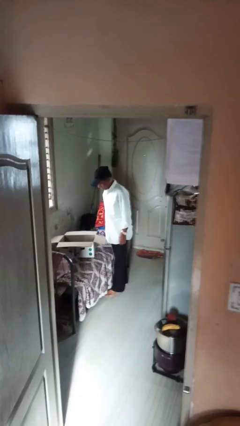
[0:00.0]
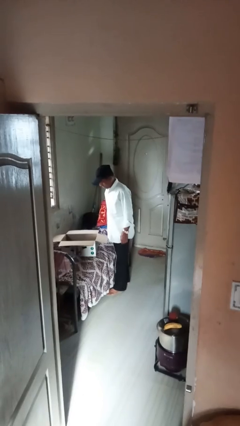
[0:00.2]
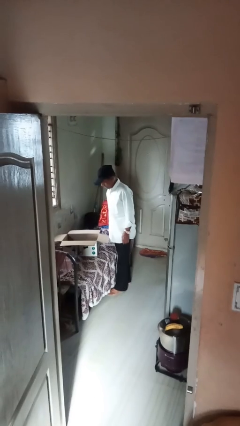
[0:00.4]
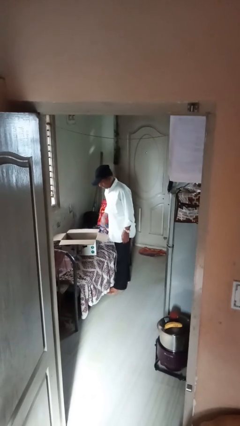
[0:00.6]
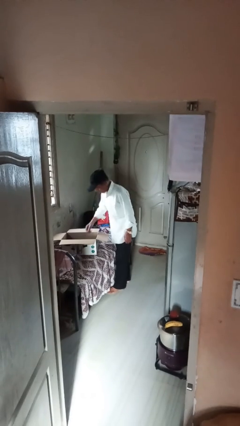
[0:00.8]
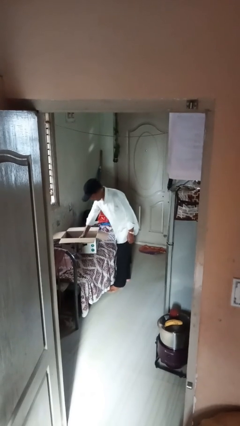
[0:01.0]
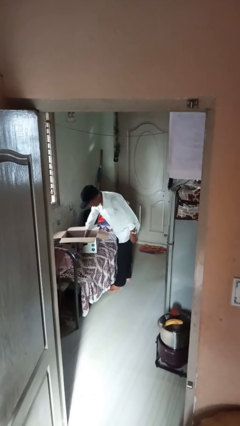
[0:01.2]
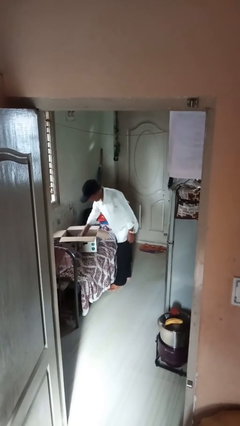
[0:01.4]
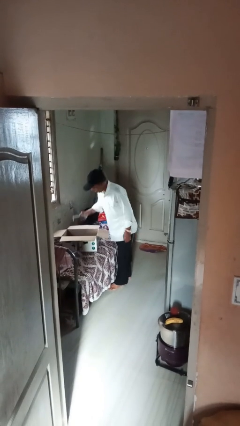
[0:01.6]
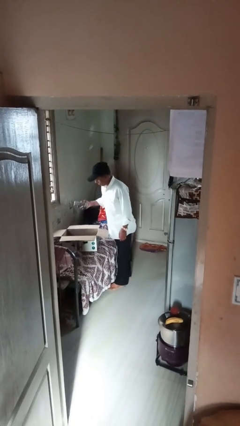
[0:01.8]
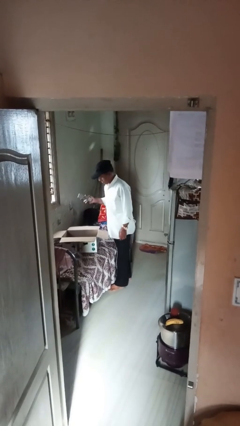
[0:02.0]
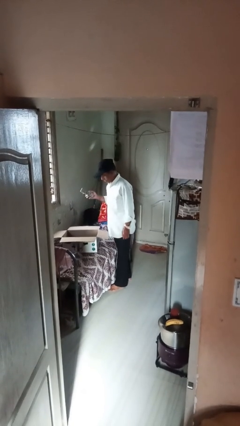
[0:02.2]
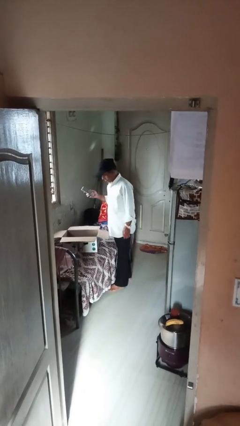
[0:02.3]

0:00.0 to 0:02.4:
person takes object from box

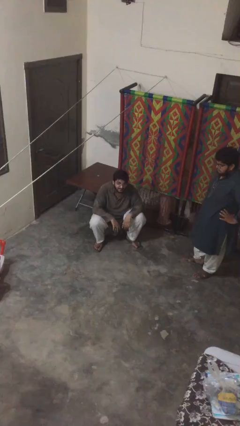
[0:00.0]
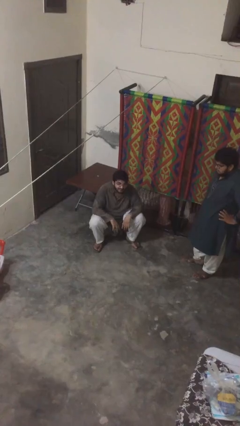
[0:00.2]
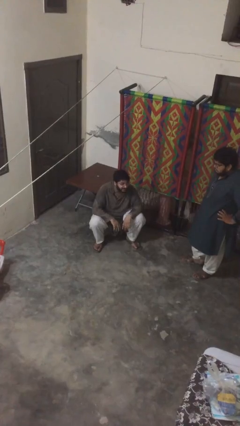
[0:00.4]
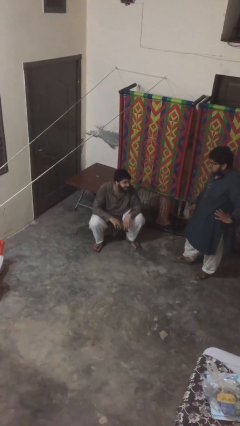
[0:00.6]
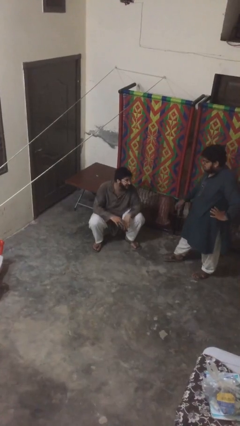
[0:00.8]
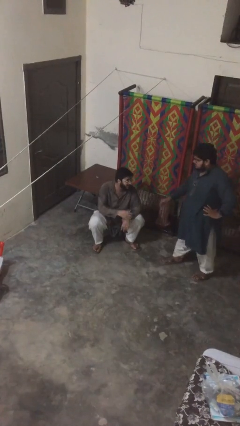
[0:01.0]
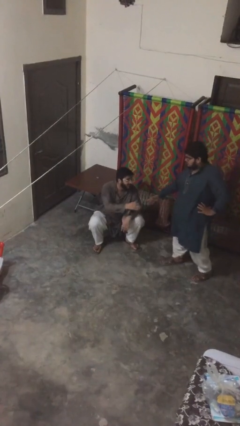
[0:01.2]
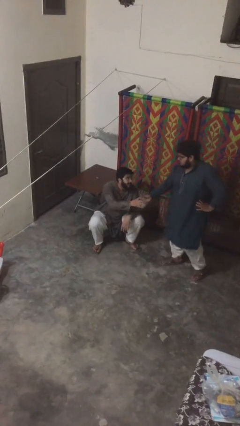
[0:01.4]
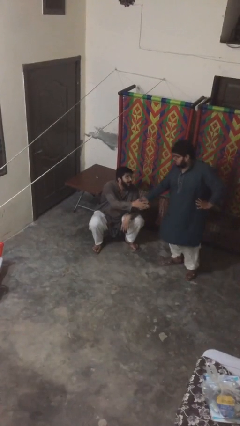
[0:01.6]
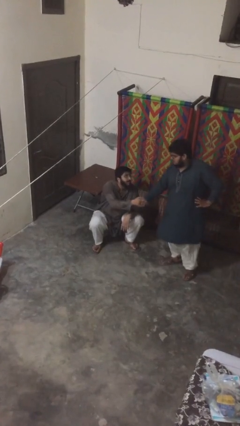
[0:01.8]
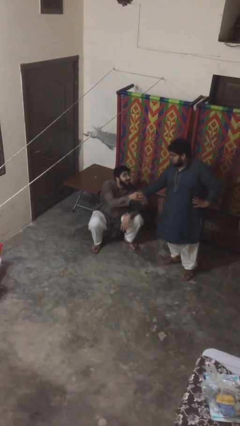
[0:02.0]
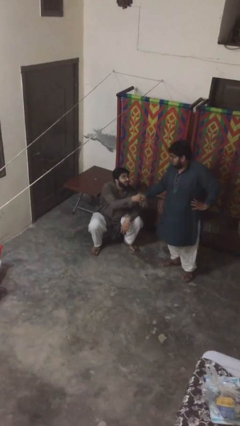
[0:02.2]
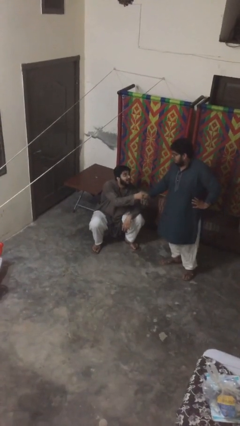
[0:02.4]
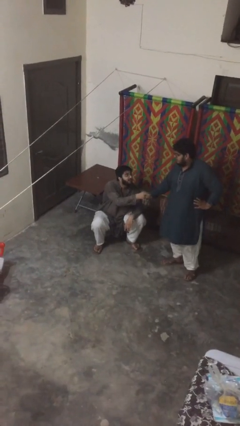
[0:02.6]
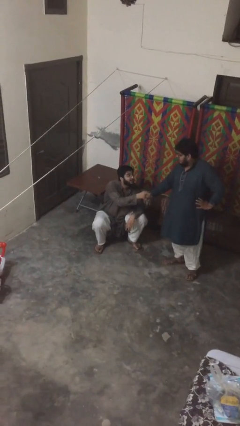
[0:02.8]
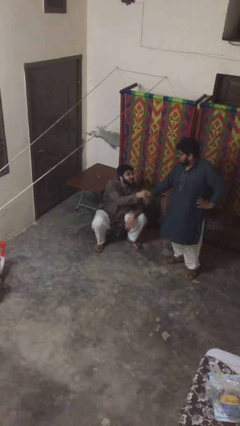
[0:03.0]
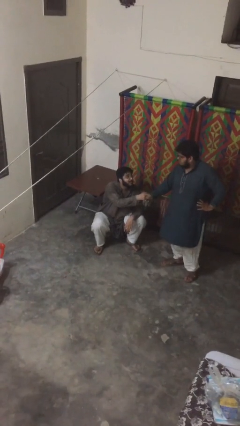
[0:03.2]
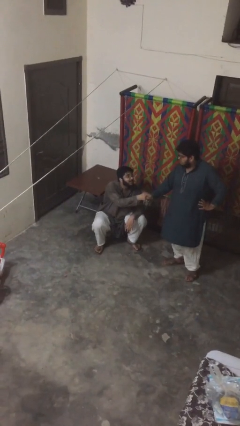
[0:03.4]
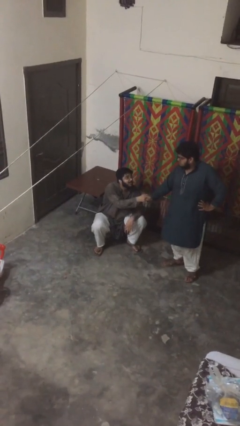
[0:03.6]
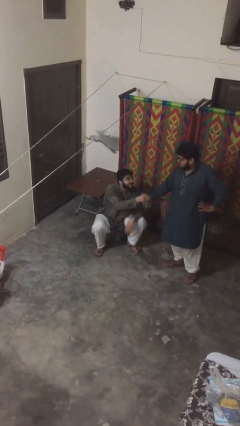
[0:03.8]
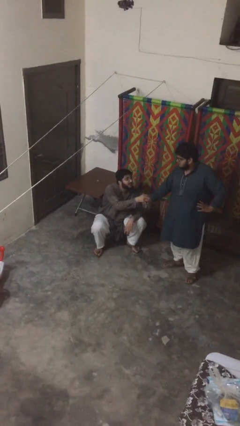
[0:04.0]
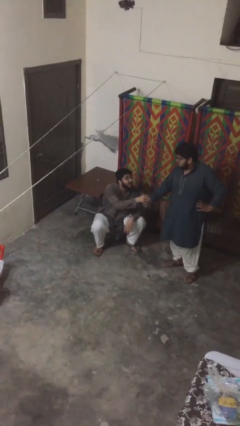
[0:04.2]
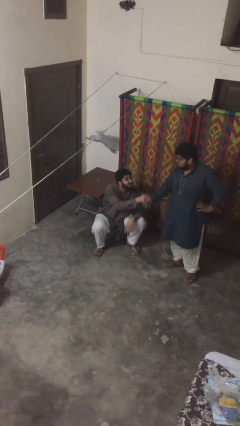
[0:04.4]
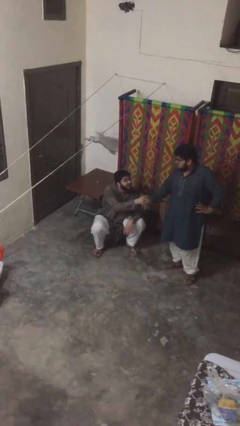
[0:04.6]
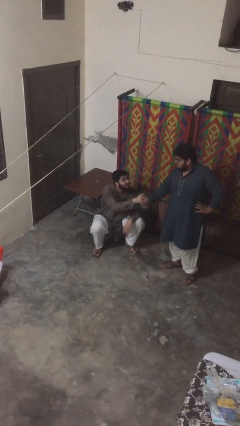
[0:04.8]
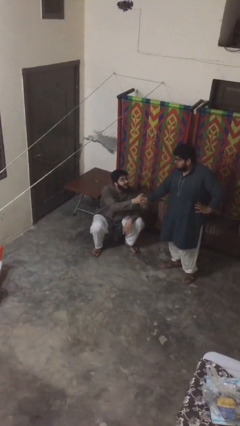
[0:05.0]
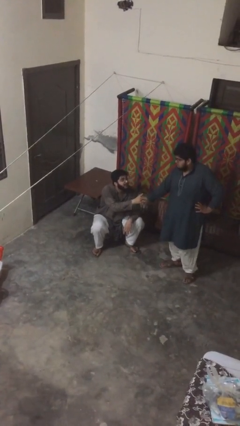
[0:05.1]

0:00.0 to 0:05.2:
person shakes hand

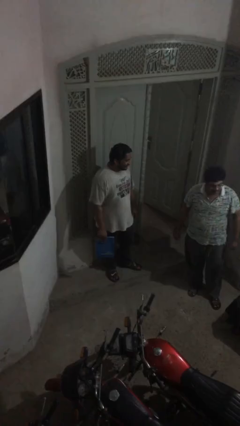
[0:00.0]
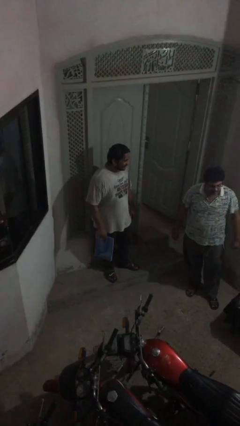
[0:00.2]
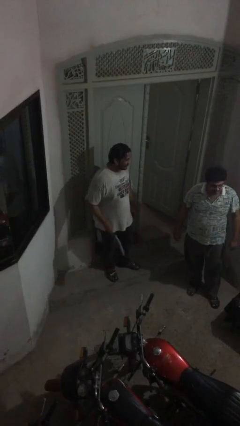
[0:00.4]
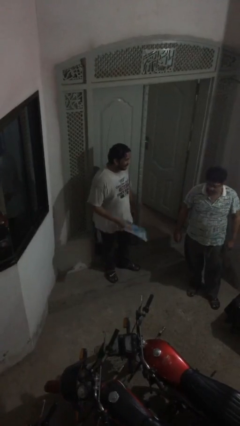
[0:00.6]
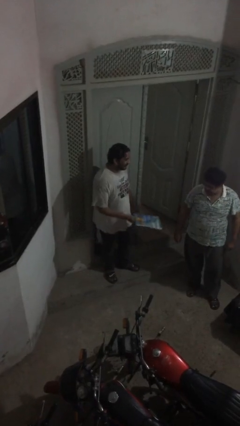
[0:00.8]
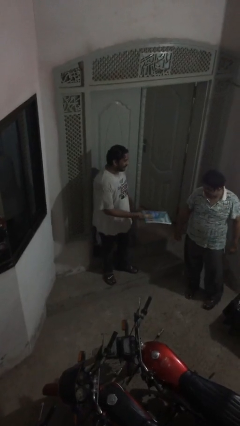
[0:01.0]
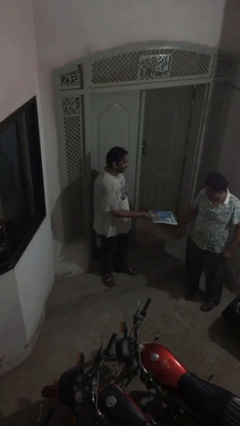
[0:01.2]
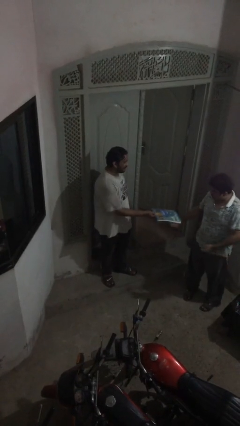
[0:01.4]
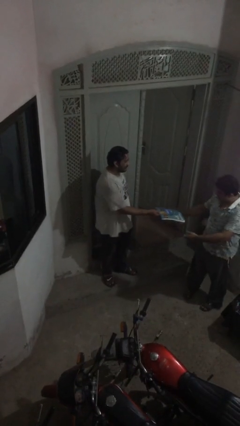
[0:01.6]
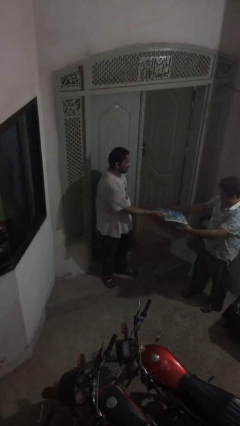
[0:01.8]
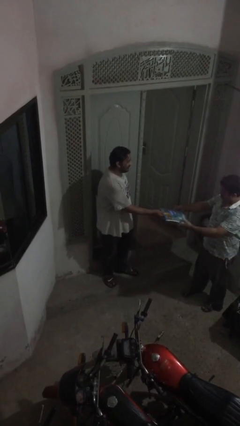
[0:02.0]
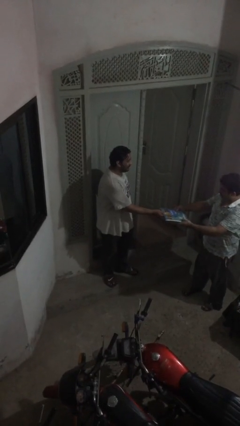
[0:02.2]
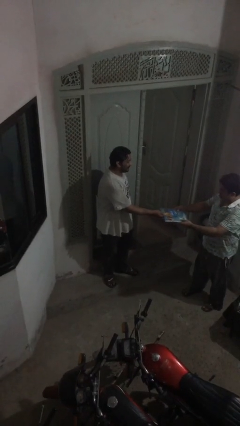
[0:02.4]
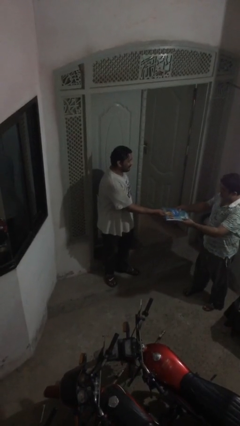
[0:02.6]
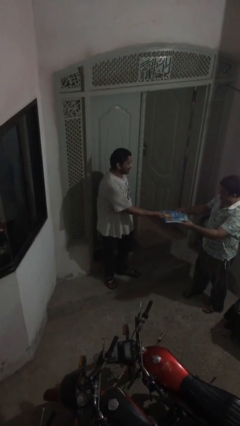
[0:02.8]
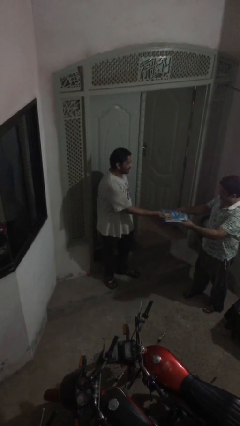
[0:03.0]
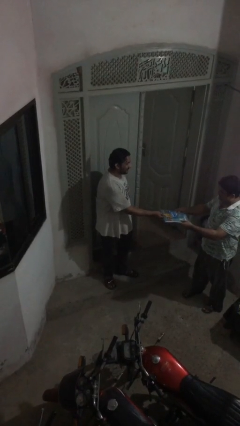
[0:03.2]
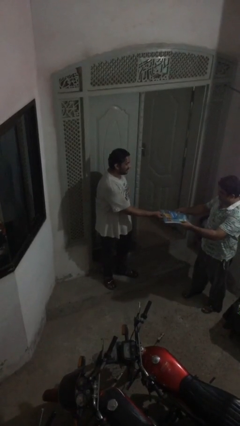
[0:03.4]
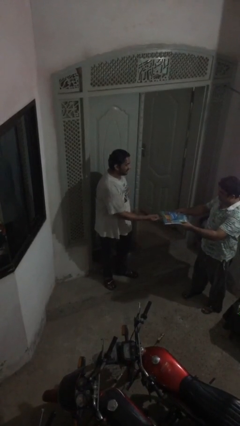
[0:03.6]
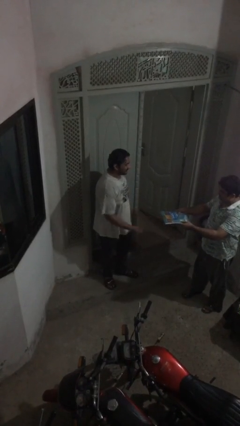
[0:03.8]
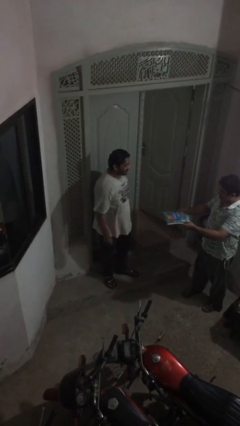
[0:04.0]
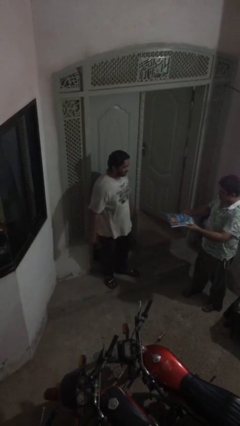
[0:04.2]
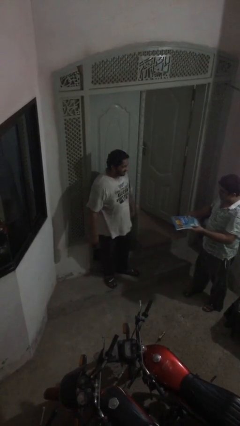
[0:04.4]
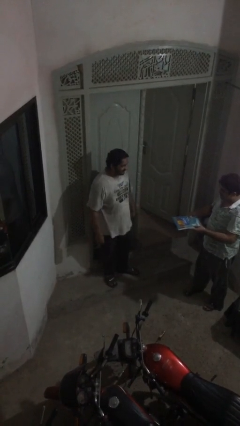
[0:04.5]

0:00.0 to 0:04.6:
person transfers object to person

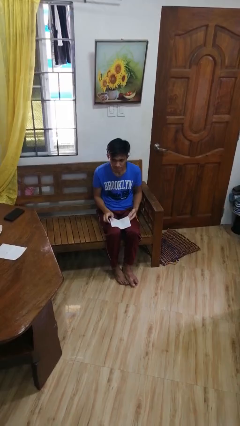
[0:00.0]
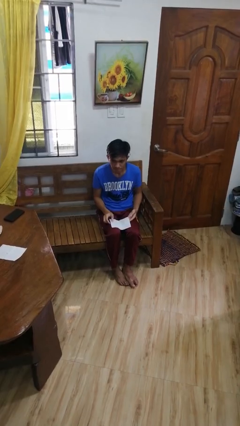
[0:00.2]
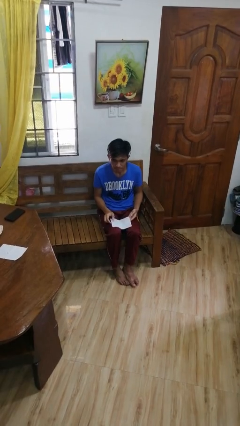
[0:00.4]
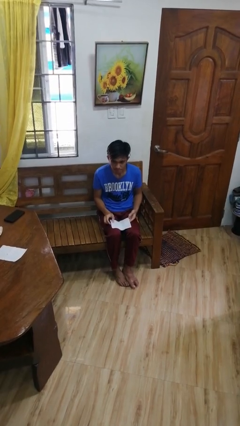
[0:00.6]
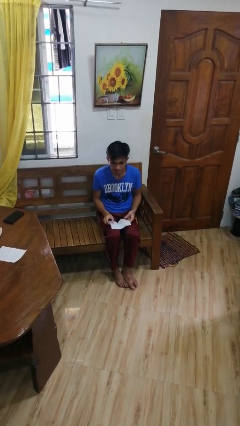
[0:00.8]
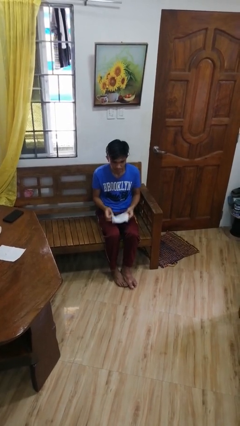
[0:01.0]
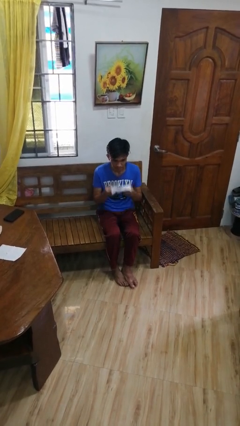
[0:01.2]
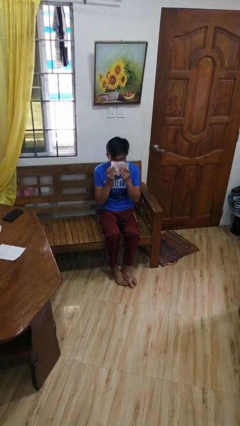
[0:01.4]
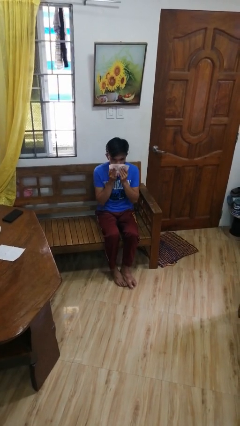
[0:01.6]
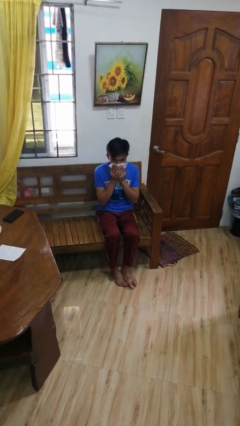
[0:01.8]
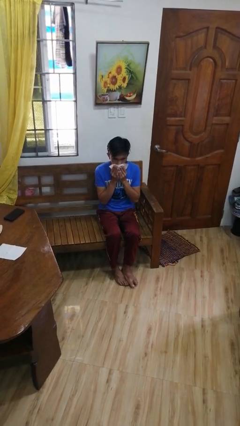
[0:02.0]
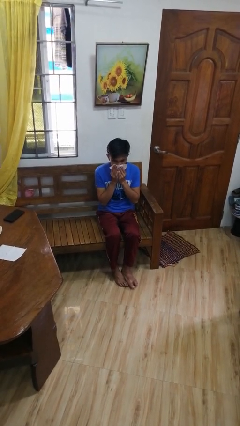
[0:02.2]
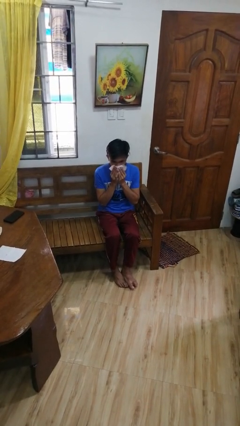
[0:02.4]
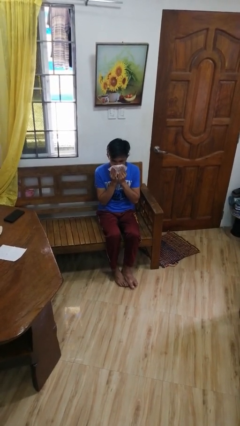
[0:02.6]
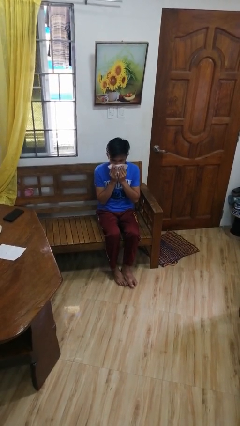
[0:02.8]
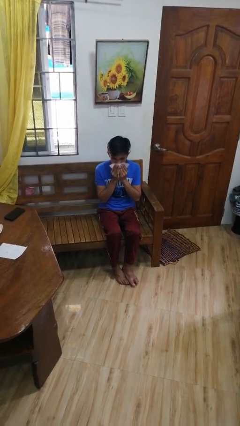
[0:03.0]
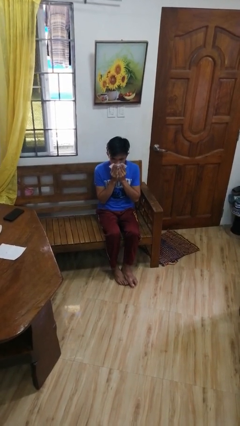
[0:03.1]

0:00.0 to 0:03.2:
person wipes mouth with napkin

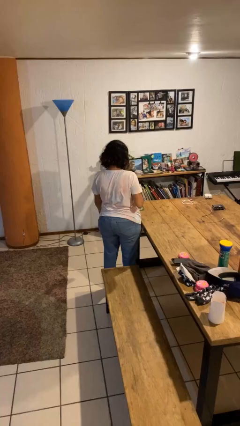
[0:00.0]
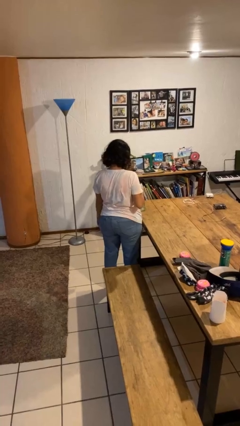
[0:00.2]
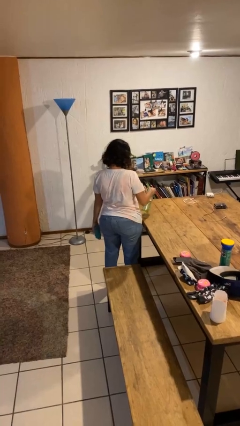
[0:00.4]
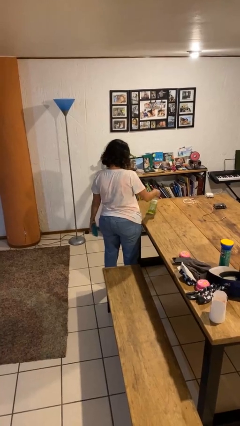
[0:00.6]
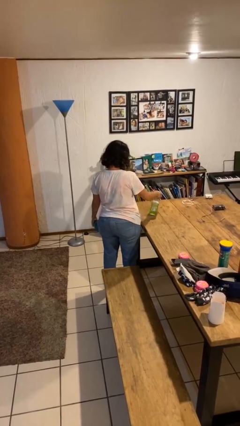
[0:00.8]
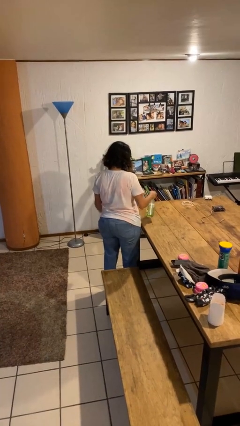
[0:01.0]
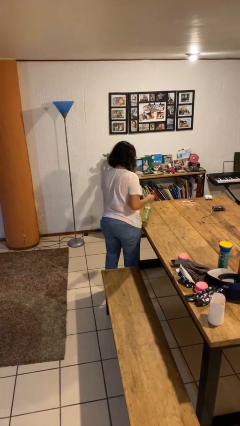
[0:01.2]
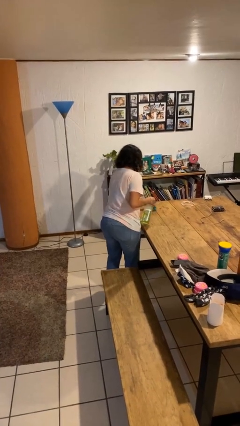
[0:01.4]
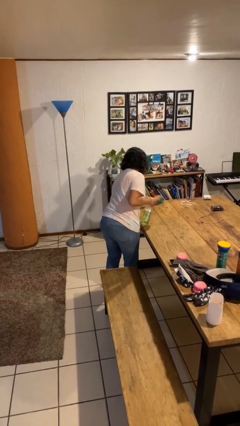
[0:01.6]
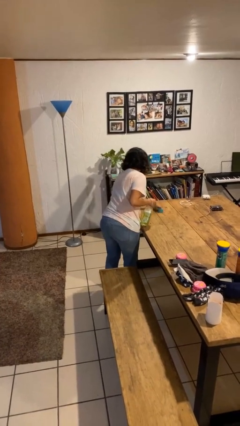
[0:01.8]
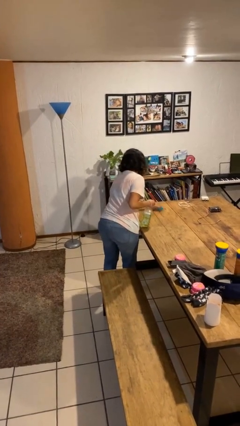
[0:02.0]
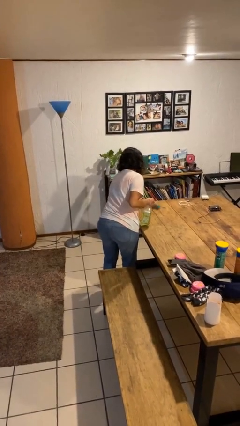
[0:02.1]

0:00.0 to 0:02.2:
person sprays from bottle

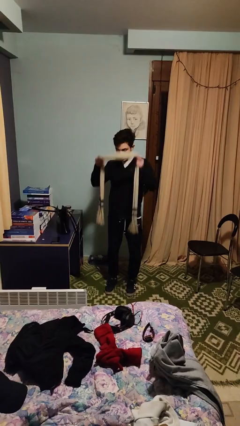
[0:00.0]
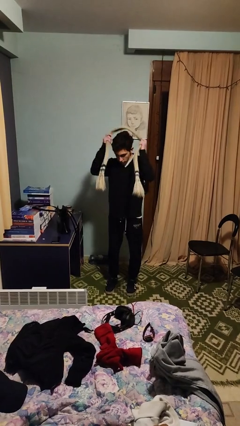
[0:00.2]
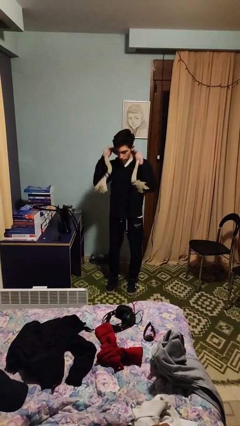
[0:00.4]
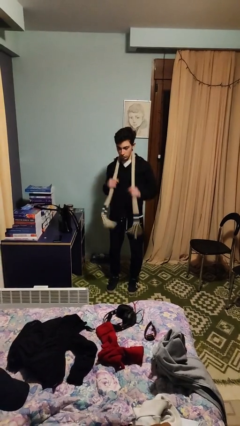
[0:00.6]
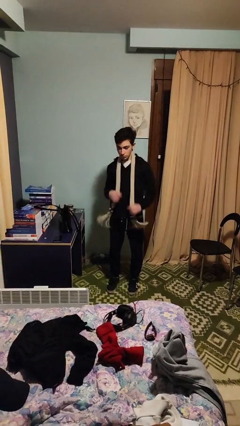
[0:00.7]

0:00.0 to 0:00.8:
person puts on scarf
